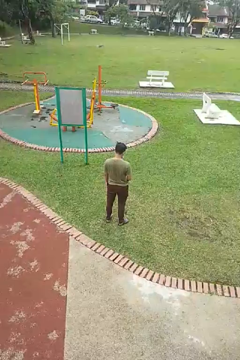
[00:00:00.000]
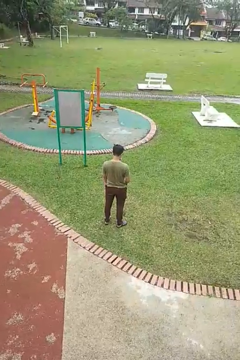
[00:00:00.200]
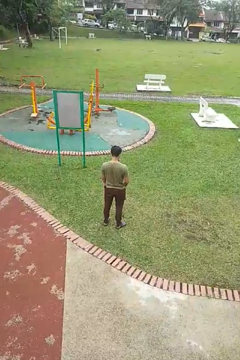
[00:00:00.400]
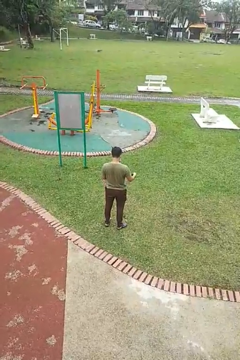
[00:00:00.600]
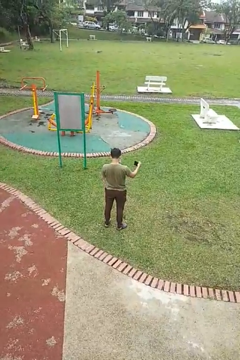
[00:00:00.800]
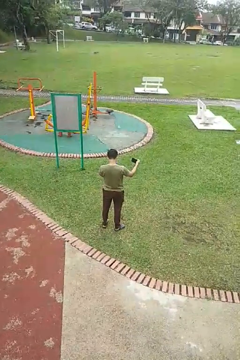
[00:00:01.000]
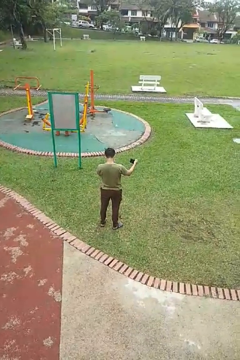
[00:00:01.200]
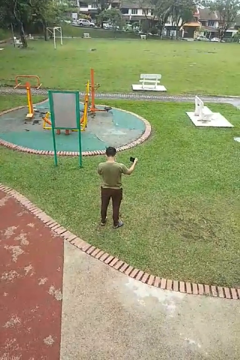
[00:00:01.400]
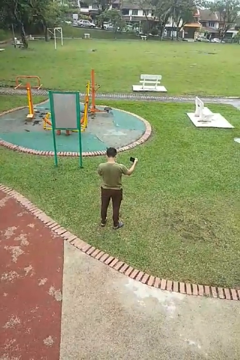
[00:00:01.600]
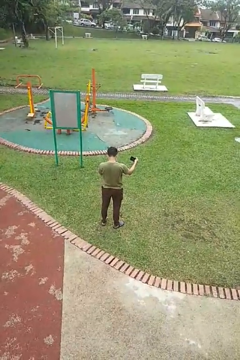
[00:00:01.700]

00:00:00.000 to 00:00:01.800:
person takes selfie

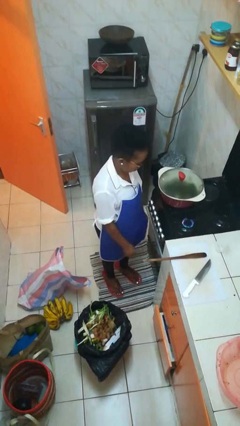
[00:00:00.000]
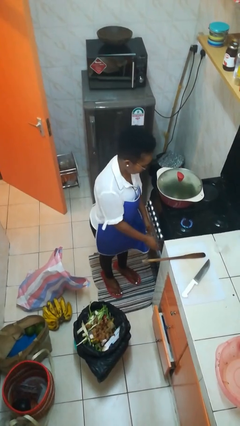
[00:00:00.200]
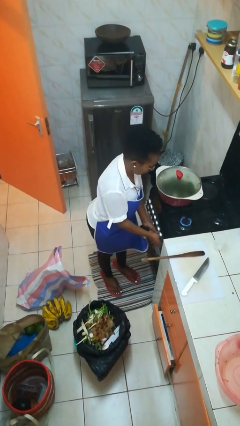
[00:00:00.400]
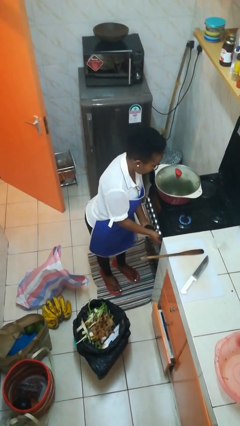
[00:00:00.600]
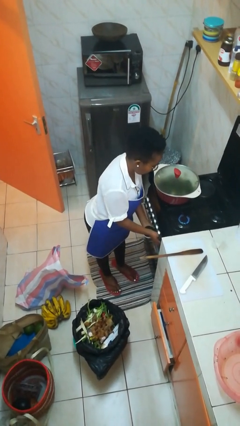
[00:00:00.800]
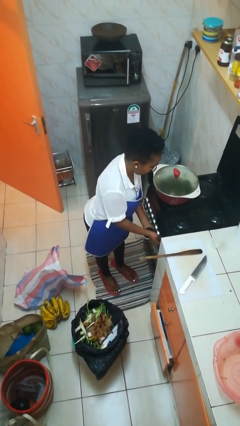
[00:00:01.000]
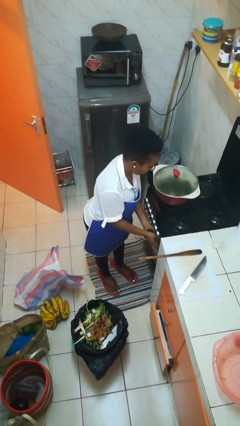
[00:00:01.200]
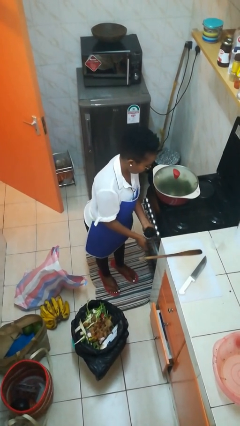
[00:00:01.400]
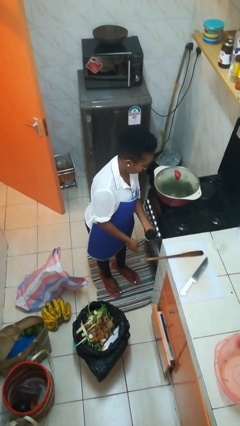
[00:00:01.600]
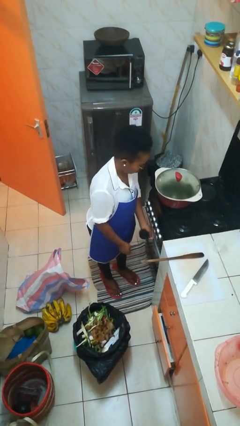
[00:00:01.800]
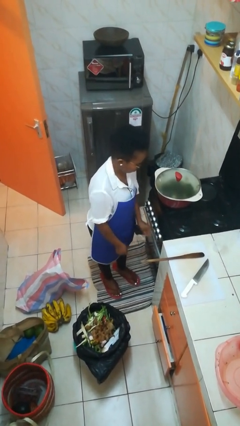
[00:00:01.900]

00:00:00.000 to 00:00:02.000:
person turns off stovetop

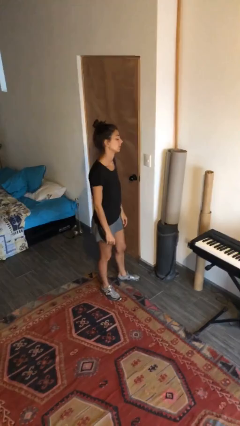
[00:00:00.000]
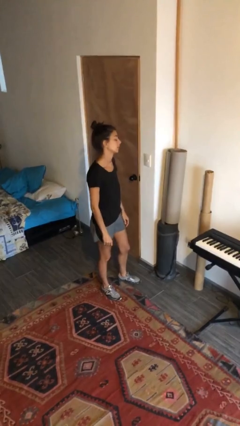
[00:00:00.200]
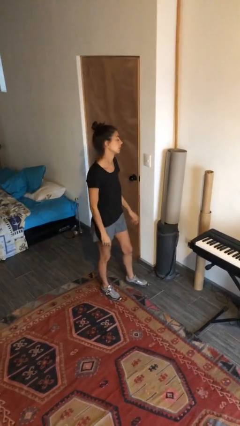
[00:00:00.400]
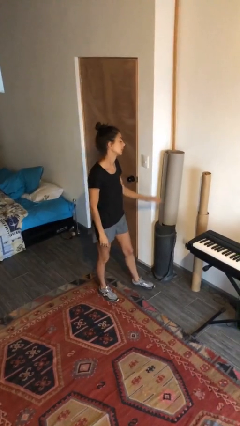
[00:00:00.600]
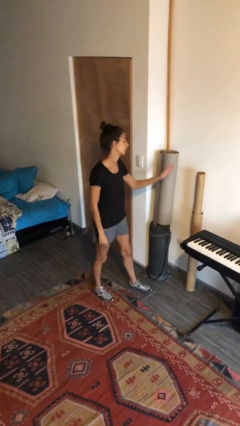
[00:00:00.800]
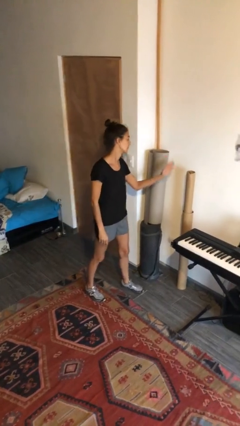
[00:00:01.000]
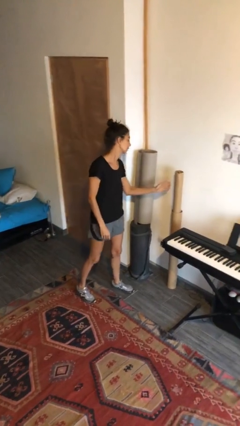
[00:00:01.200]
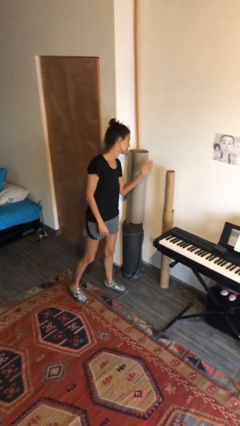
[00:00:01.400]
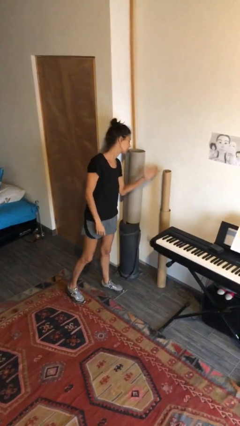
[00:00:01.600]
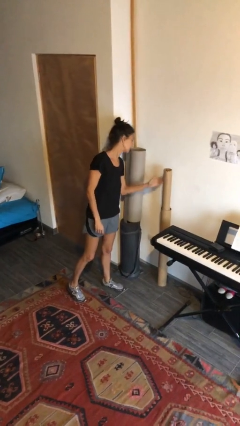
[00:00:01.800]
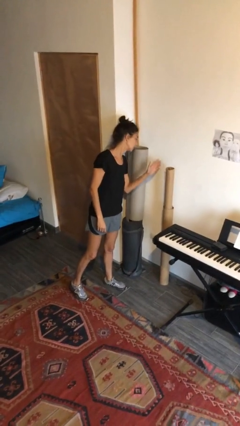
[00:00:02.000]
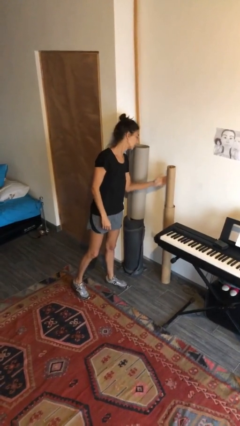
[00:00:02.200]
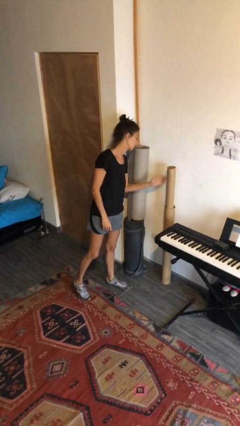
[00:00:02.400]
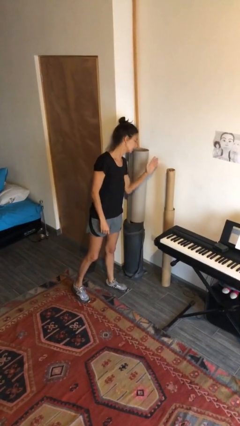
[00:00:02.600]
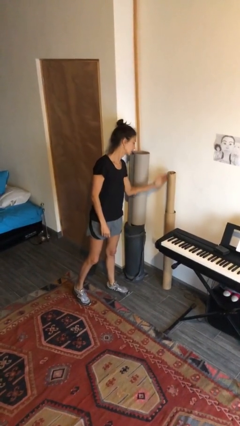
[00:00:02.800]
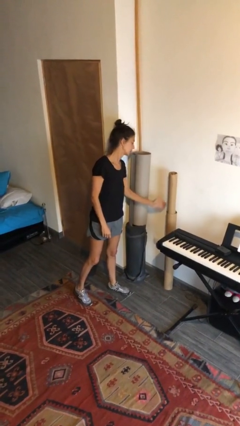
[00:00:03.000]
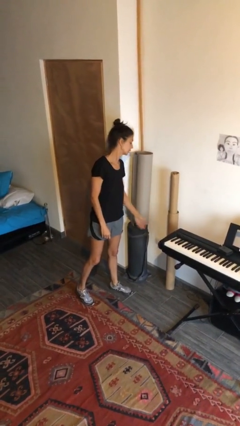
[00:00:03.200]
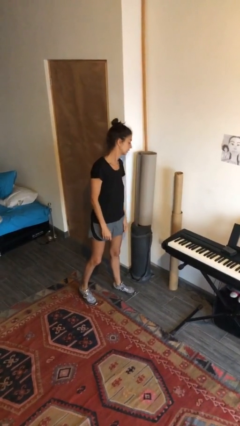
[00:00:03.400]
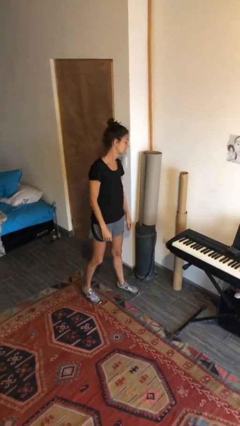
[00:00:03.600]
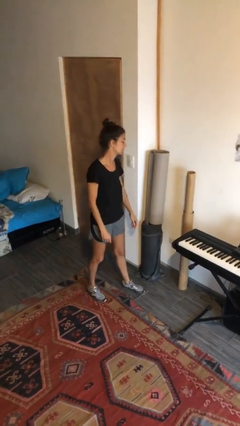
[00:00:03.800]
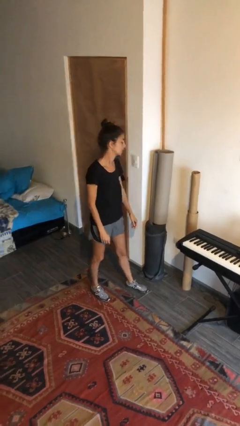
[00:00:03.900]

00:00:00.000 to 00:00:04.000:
person waves hand over object

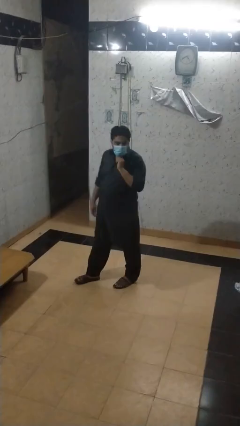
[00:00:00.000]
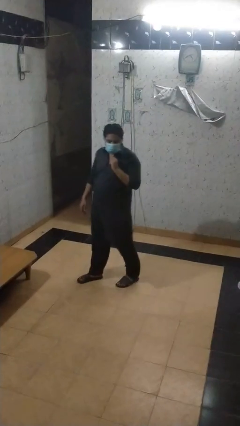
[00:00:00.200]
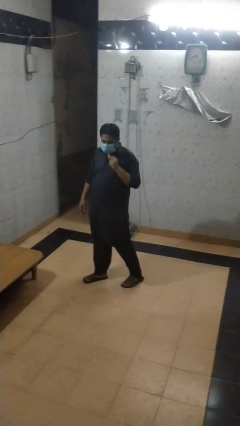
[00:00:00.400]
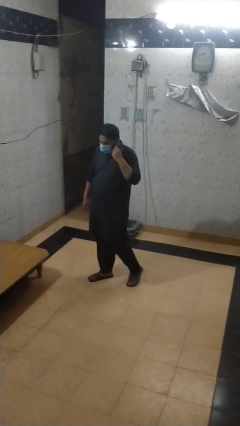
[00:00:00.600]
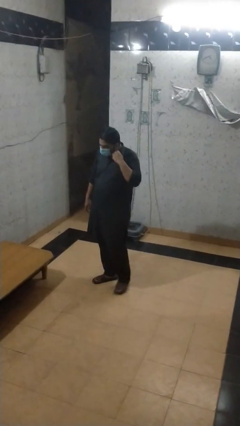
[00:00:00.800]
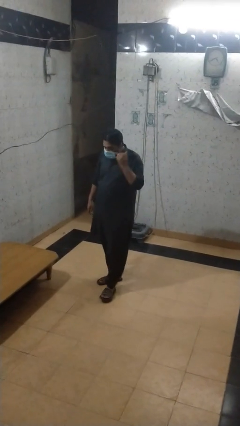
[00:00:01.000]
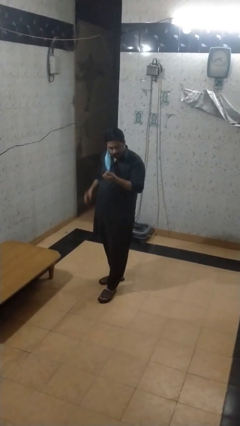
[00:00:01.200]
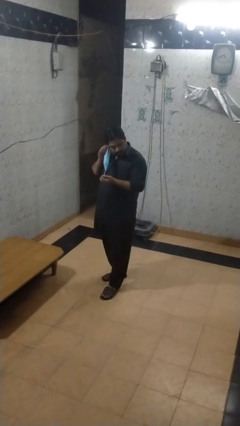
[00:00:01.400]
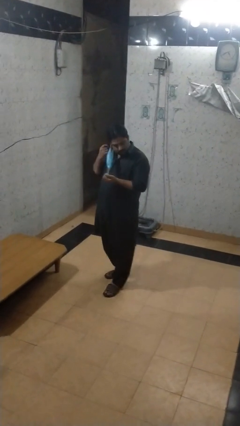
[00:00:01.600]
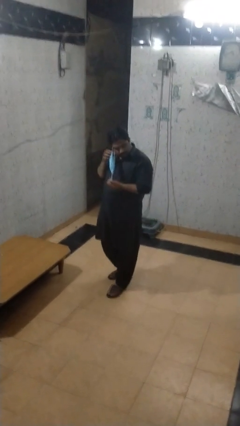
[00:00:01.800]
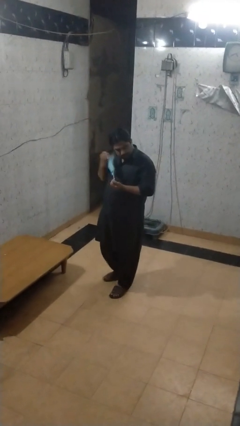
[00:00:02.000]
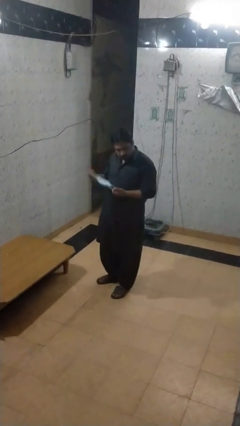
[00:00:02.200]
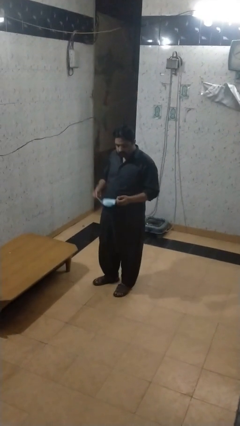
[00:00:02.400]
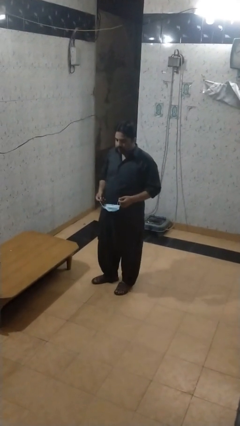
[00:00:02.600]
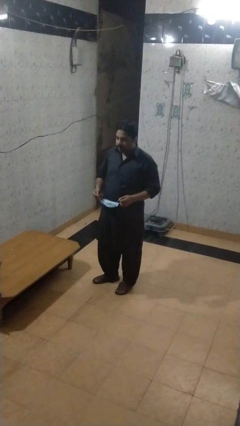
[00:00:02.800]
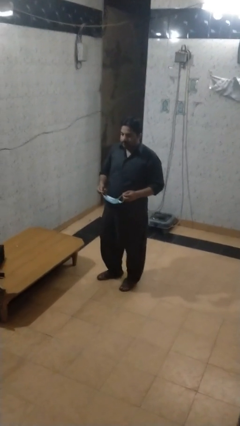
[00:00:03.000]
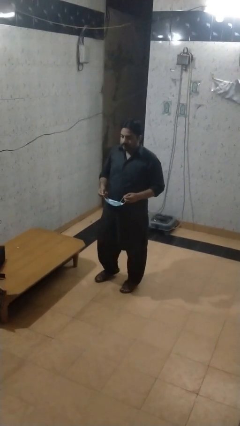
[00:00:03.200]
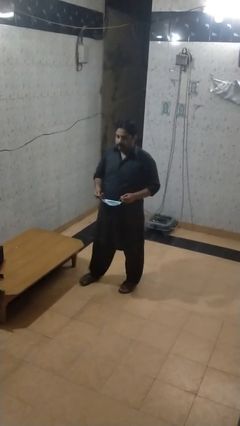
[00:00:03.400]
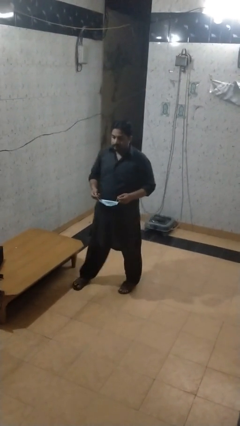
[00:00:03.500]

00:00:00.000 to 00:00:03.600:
person takes off facemask

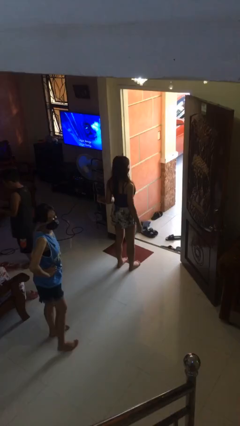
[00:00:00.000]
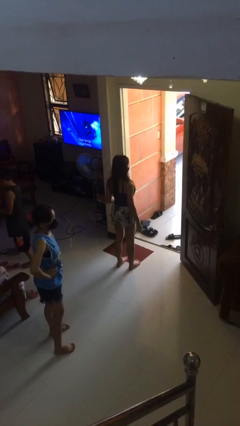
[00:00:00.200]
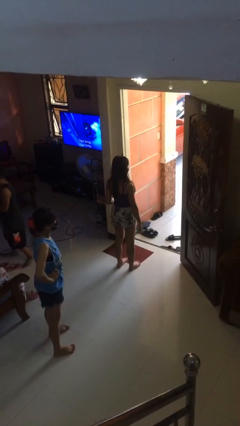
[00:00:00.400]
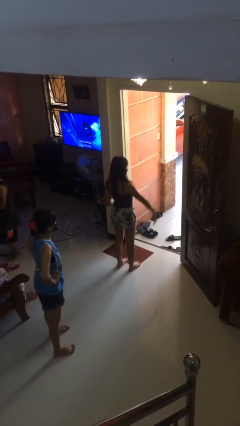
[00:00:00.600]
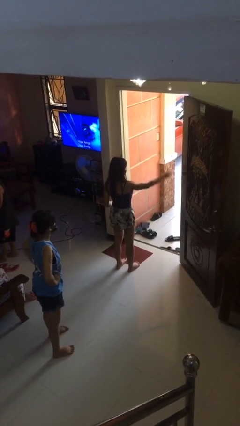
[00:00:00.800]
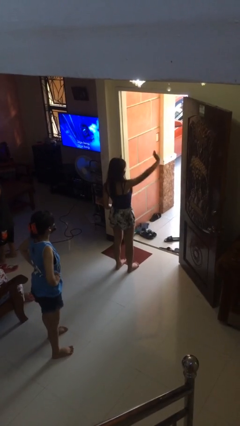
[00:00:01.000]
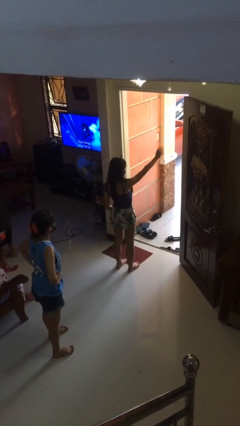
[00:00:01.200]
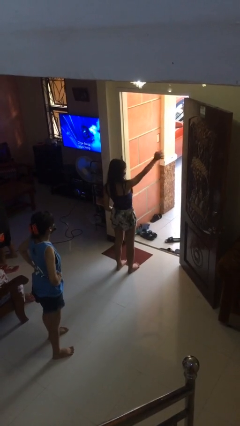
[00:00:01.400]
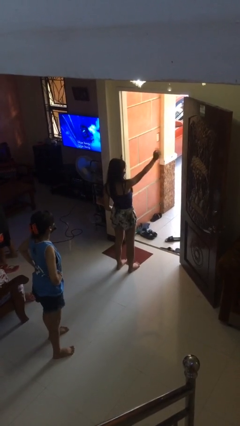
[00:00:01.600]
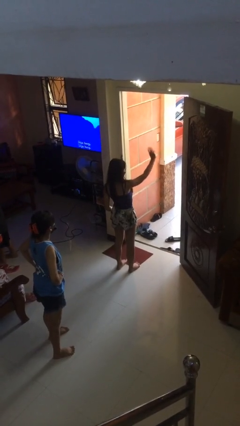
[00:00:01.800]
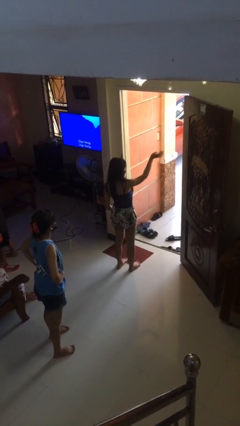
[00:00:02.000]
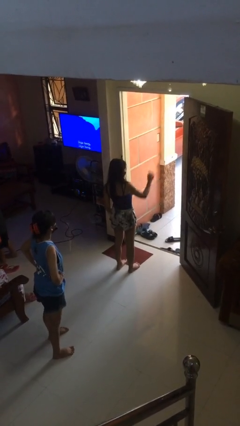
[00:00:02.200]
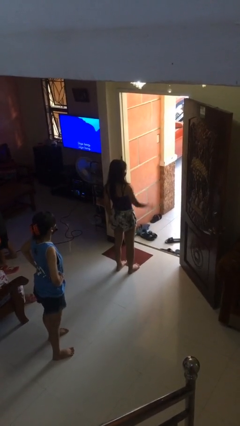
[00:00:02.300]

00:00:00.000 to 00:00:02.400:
person waves at person

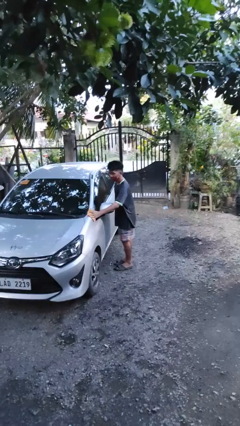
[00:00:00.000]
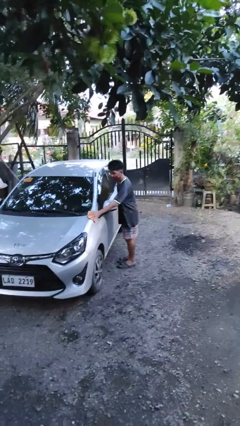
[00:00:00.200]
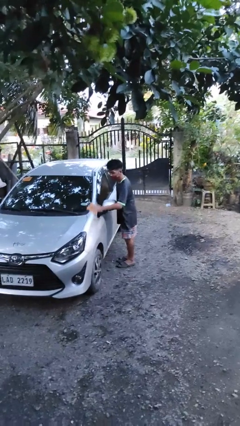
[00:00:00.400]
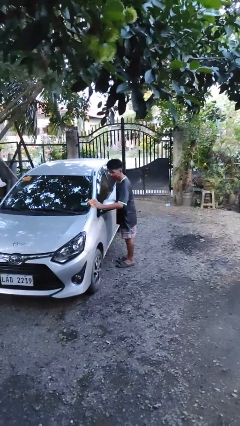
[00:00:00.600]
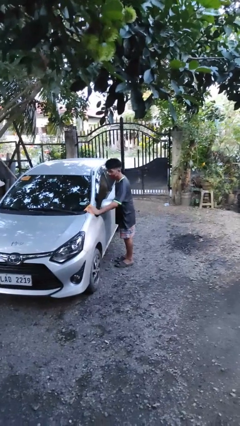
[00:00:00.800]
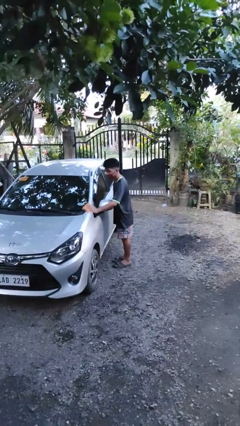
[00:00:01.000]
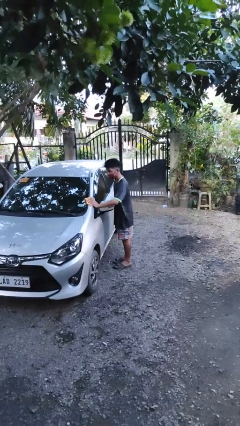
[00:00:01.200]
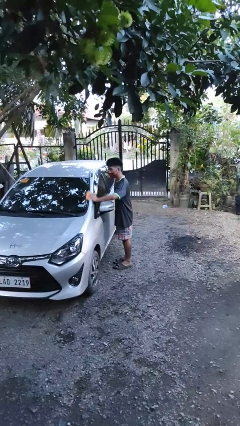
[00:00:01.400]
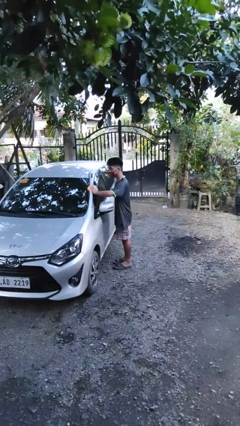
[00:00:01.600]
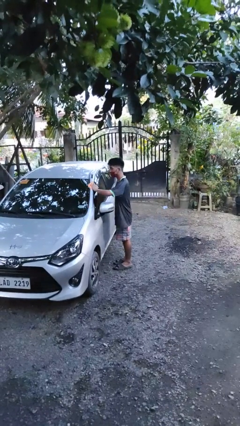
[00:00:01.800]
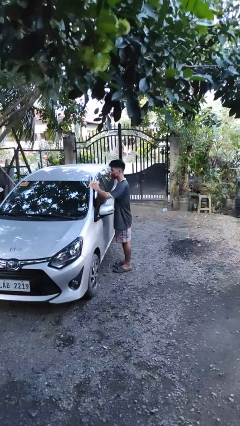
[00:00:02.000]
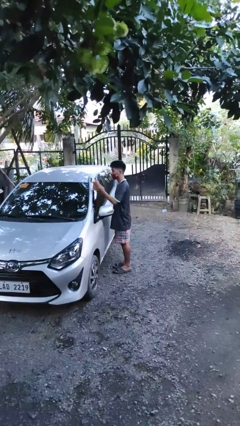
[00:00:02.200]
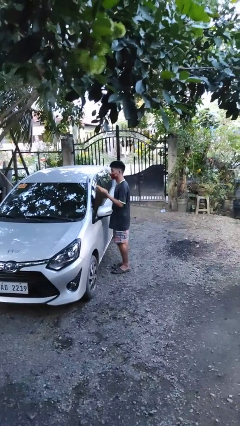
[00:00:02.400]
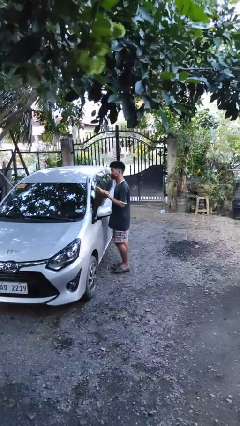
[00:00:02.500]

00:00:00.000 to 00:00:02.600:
person polishes car with rag

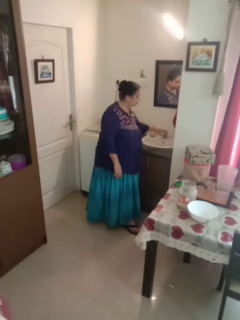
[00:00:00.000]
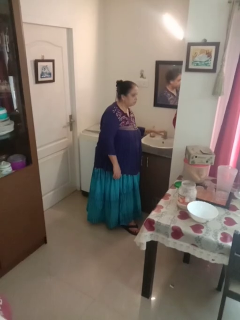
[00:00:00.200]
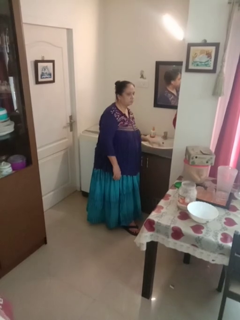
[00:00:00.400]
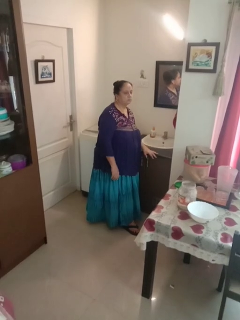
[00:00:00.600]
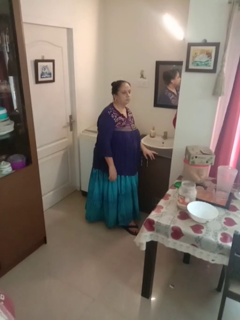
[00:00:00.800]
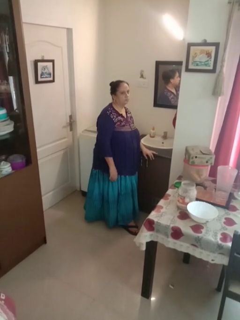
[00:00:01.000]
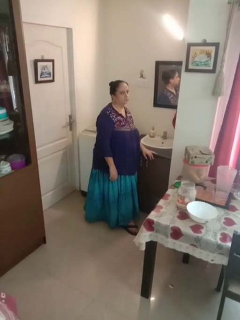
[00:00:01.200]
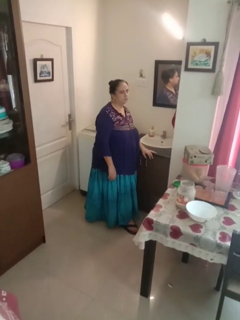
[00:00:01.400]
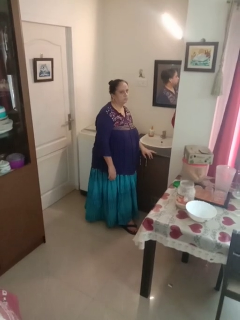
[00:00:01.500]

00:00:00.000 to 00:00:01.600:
person turns off faucet
